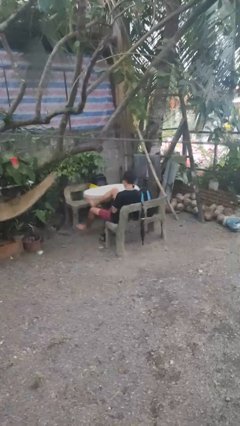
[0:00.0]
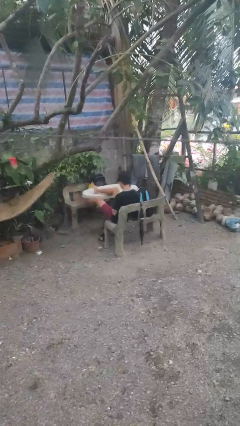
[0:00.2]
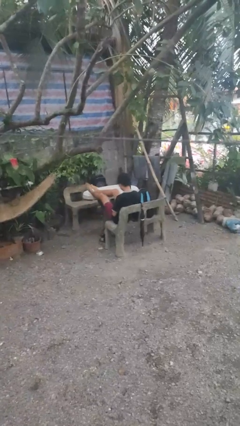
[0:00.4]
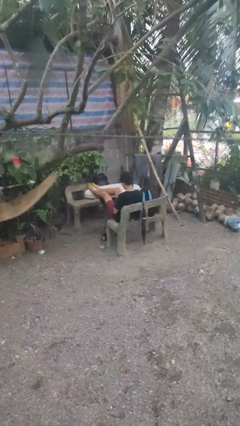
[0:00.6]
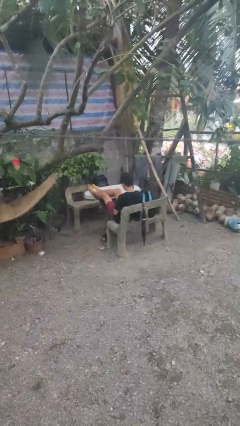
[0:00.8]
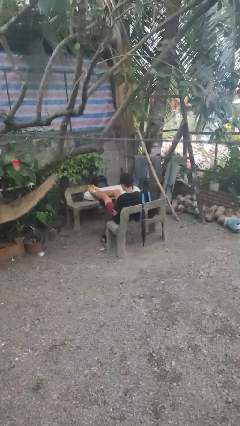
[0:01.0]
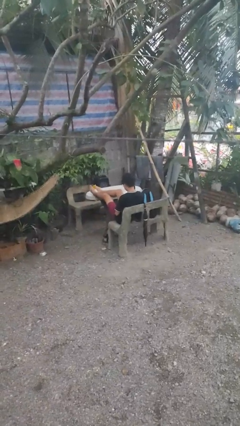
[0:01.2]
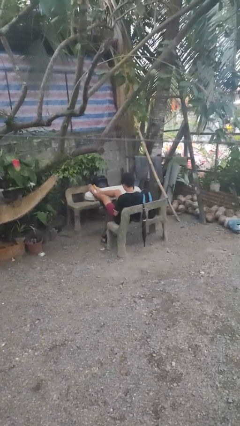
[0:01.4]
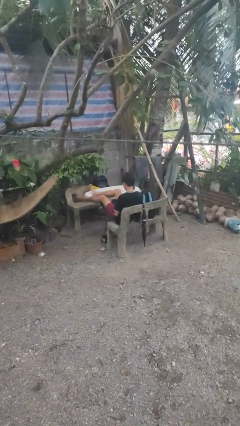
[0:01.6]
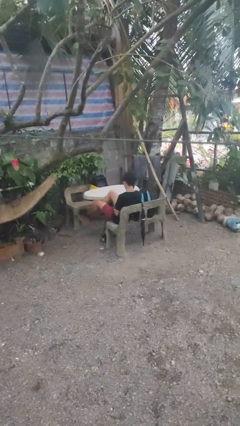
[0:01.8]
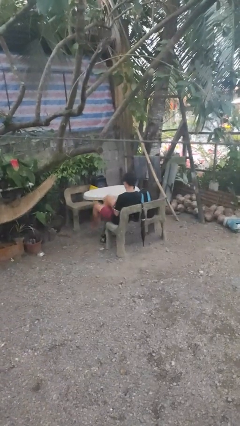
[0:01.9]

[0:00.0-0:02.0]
person puts feet up

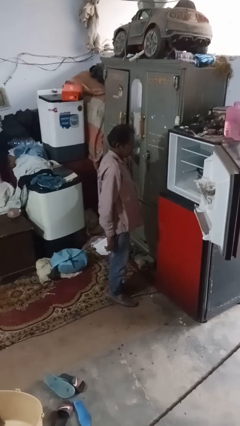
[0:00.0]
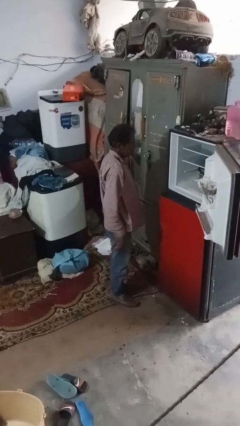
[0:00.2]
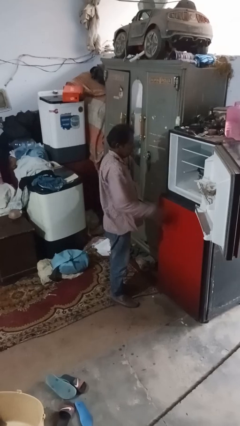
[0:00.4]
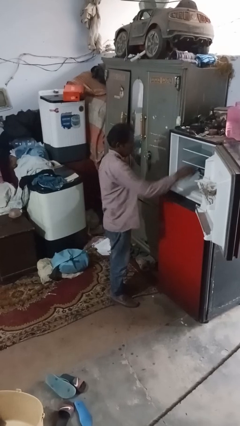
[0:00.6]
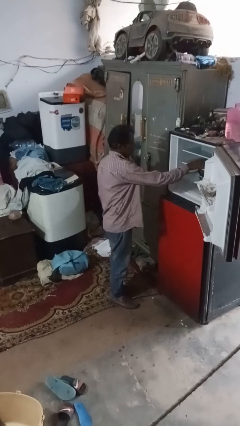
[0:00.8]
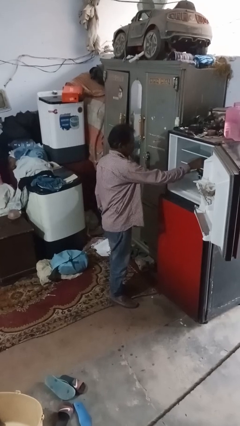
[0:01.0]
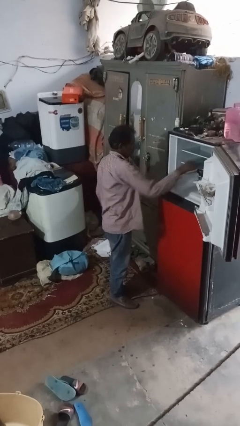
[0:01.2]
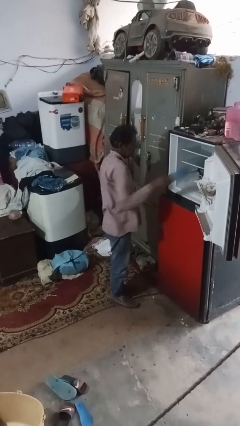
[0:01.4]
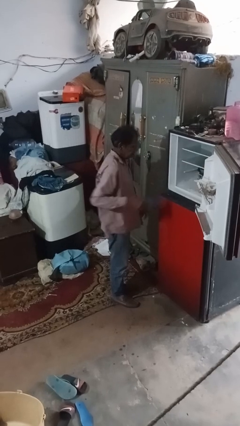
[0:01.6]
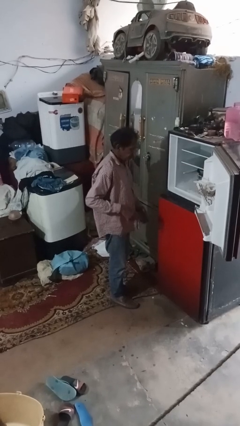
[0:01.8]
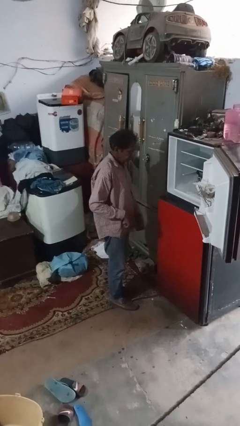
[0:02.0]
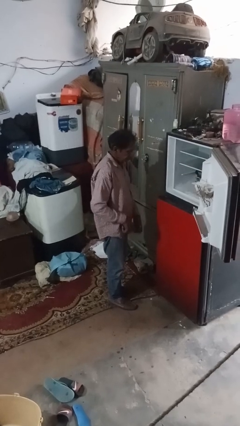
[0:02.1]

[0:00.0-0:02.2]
person takes object from refrigerator

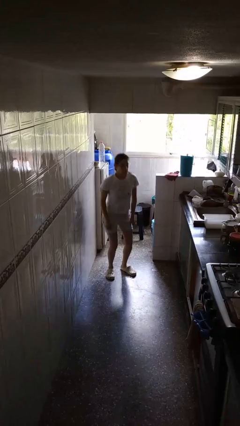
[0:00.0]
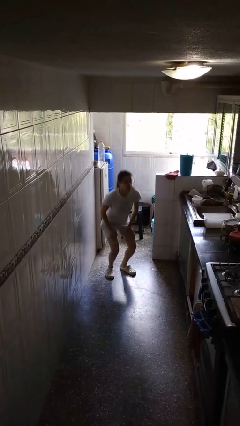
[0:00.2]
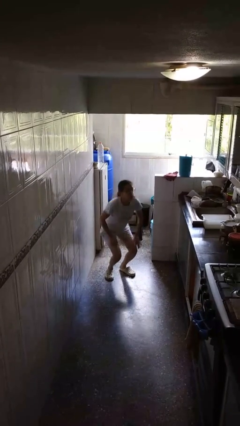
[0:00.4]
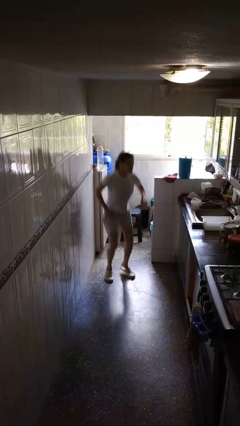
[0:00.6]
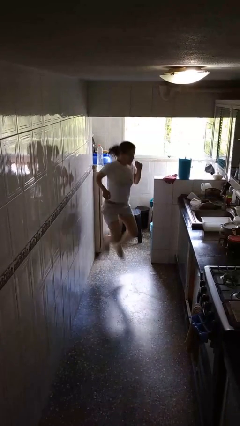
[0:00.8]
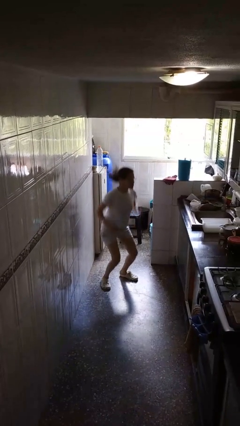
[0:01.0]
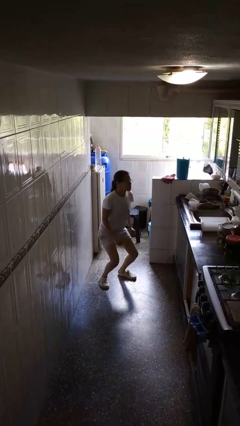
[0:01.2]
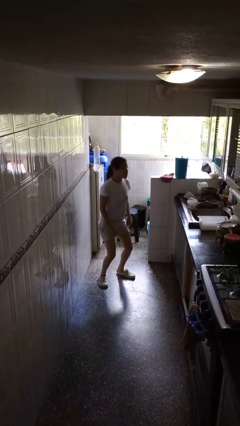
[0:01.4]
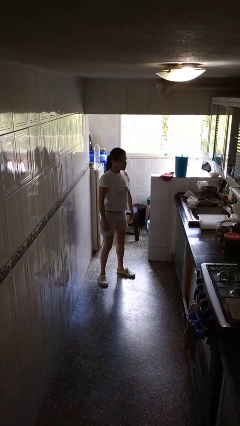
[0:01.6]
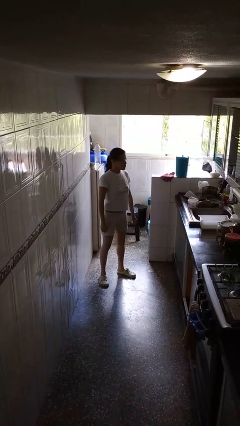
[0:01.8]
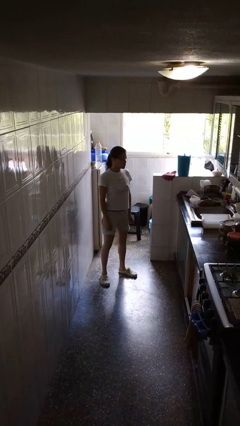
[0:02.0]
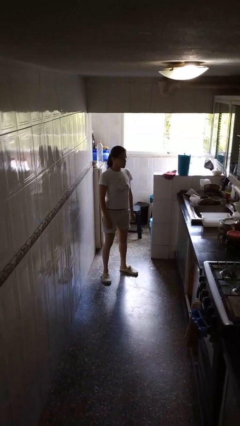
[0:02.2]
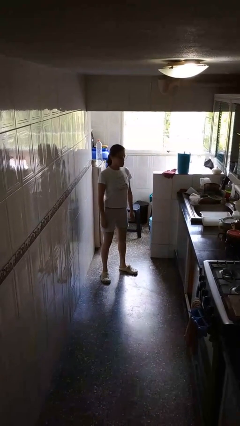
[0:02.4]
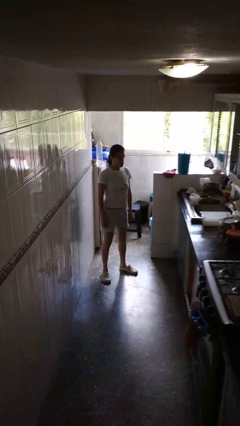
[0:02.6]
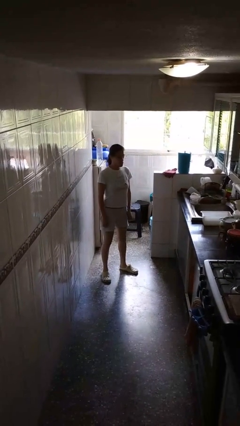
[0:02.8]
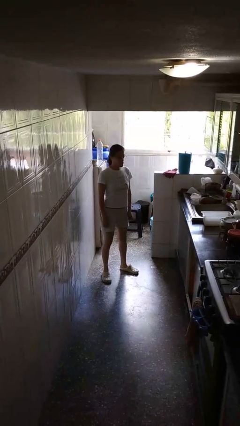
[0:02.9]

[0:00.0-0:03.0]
person jumps

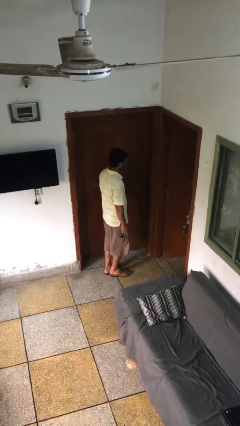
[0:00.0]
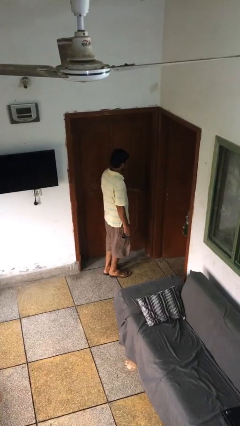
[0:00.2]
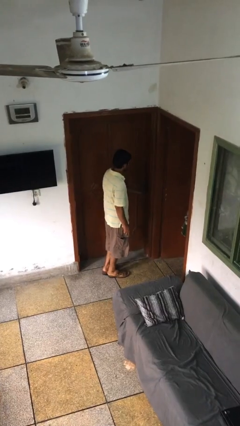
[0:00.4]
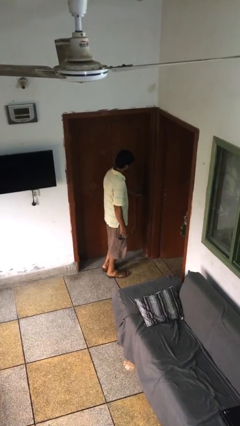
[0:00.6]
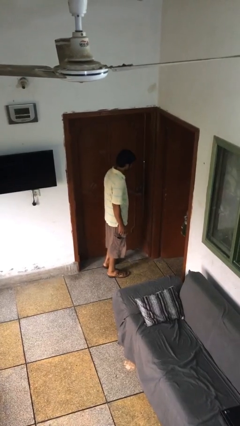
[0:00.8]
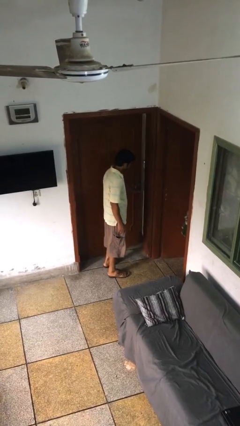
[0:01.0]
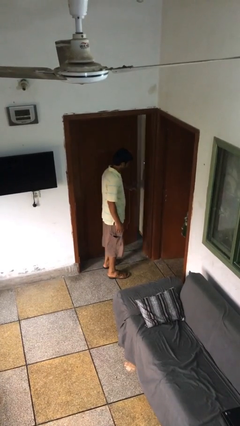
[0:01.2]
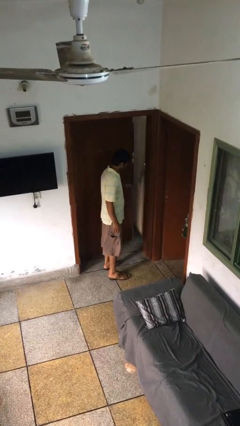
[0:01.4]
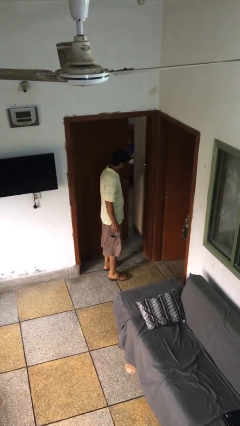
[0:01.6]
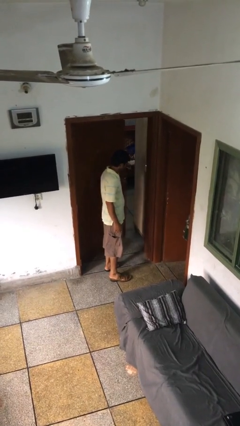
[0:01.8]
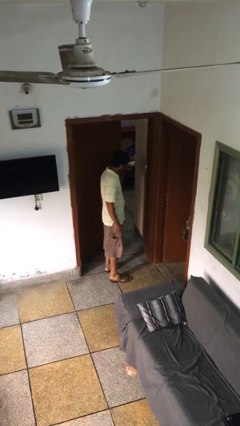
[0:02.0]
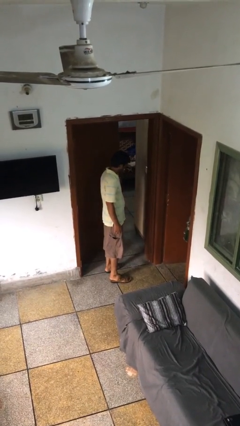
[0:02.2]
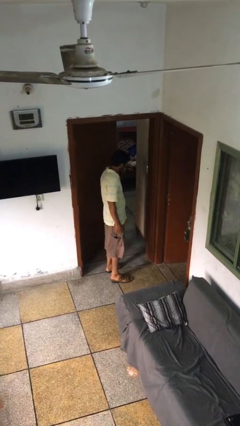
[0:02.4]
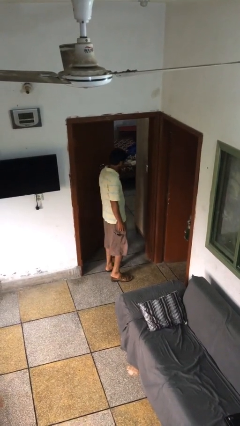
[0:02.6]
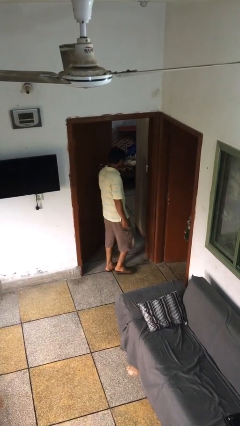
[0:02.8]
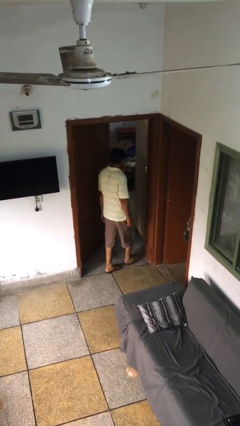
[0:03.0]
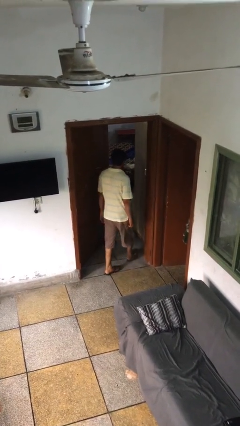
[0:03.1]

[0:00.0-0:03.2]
person opens facility door

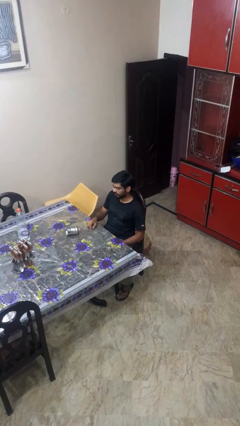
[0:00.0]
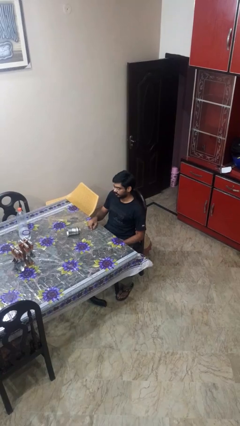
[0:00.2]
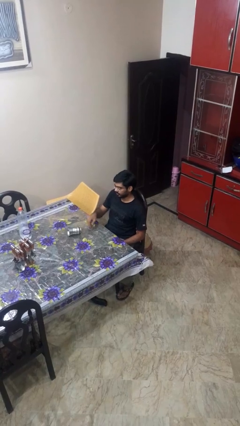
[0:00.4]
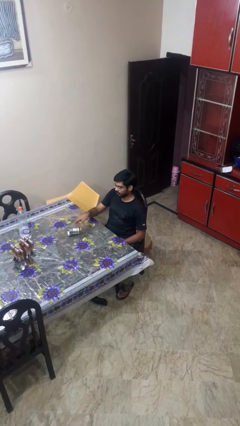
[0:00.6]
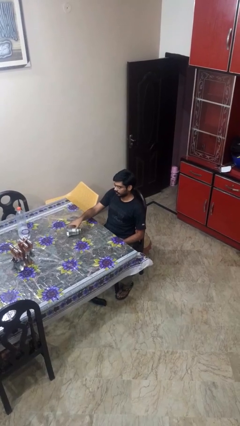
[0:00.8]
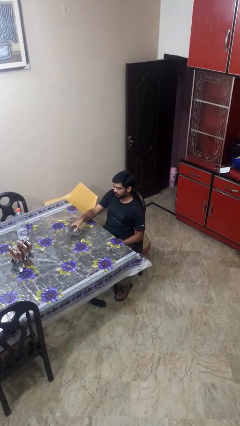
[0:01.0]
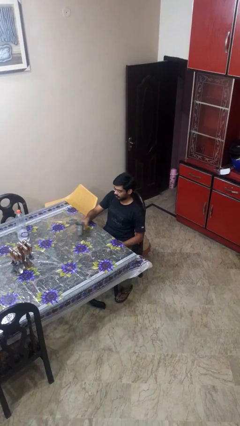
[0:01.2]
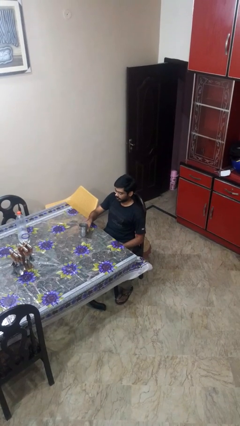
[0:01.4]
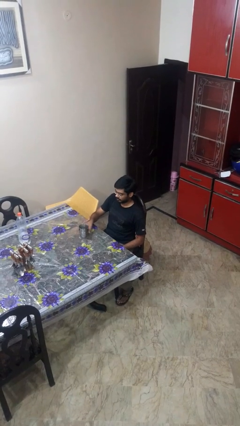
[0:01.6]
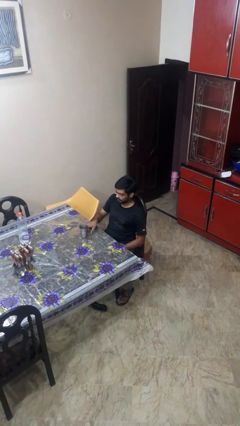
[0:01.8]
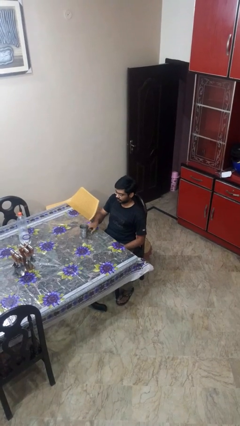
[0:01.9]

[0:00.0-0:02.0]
person sets upright glass

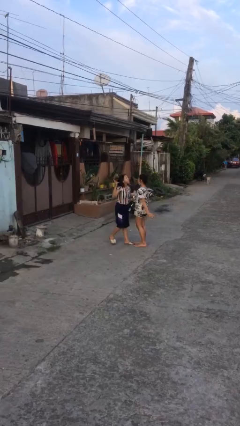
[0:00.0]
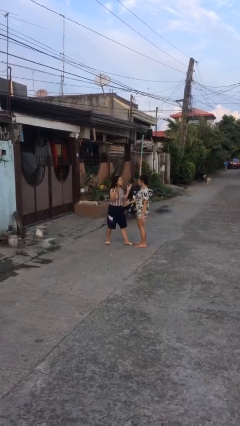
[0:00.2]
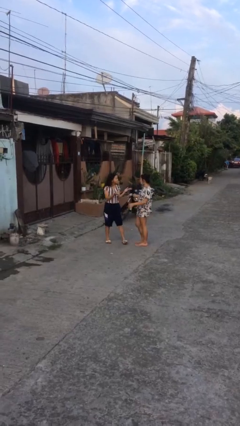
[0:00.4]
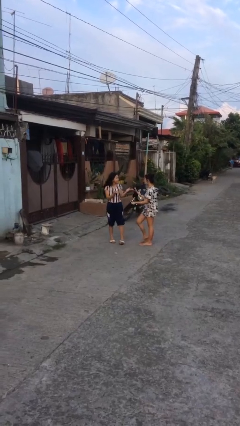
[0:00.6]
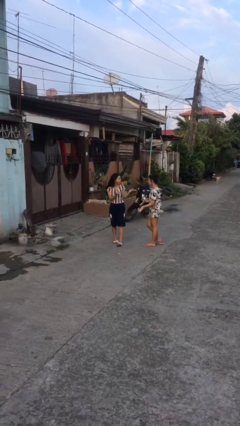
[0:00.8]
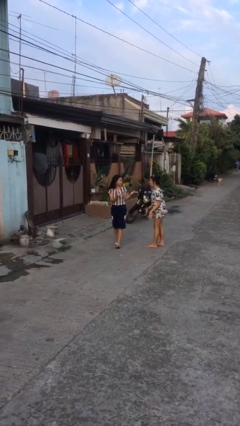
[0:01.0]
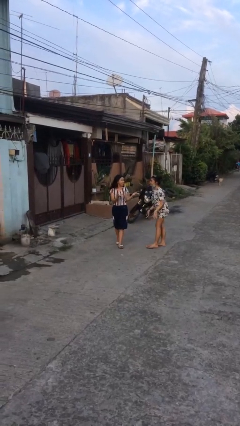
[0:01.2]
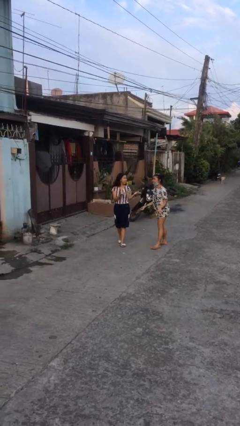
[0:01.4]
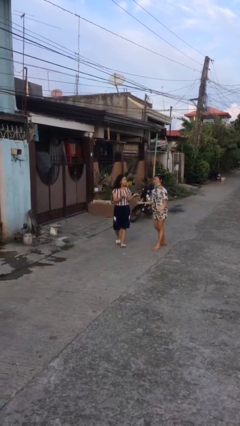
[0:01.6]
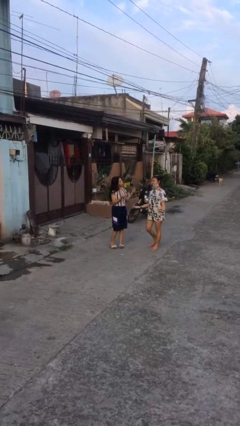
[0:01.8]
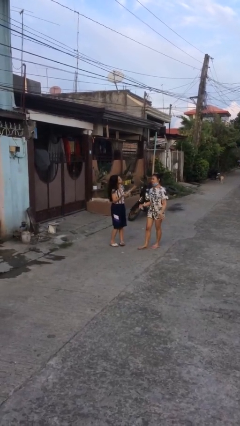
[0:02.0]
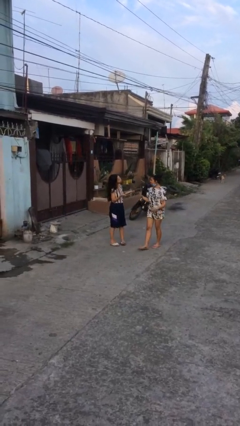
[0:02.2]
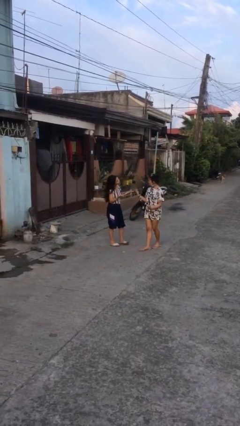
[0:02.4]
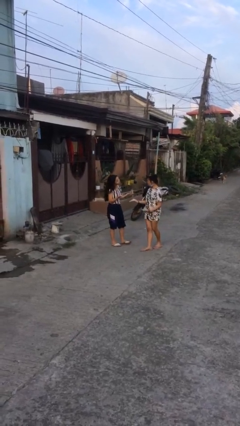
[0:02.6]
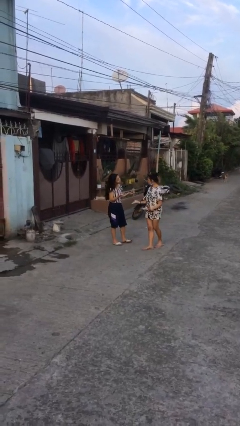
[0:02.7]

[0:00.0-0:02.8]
person talks to person

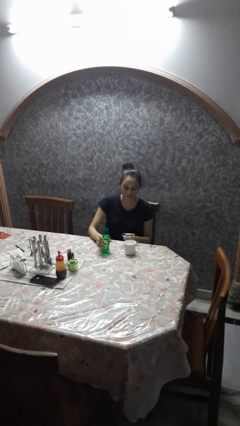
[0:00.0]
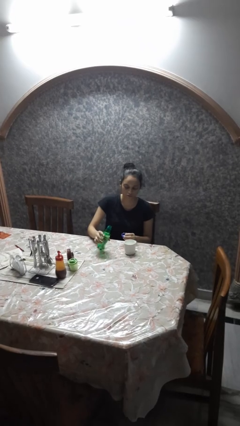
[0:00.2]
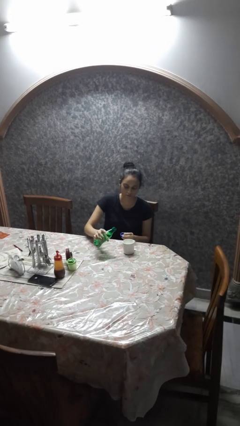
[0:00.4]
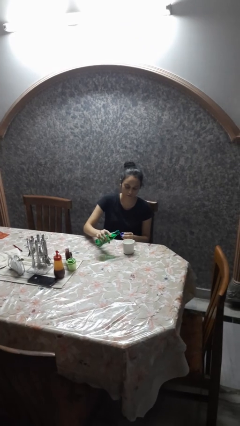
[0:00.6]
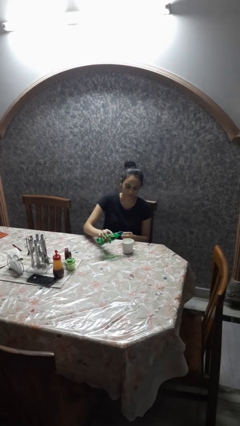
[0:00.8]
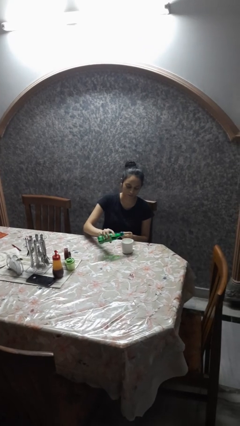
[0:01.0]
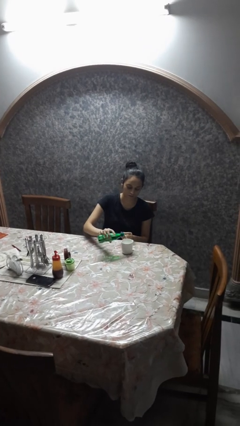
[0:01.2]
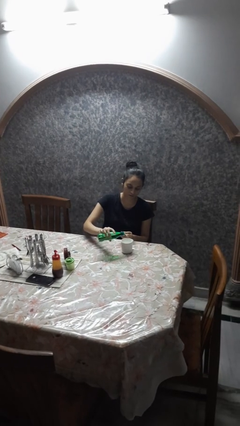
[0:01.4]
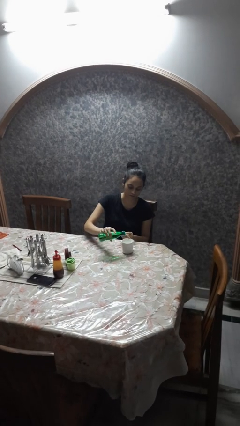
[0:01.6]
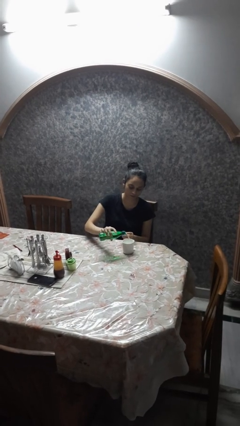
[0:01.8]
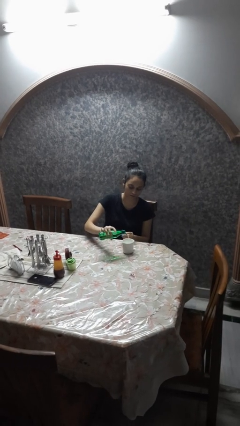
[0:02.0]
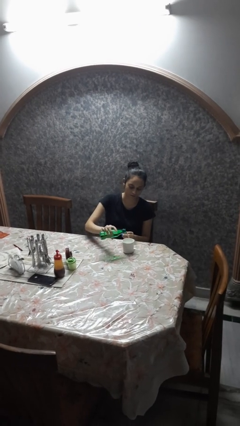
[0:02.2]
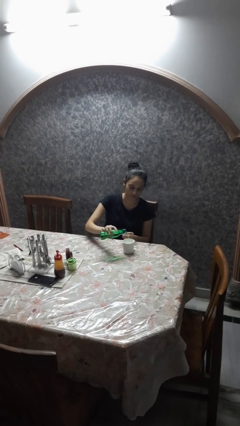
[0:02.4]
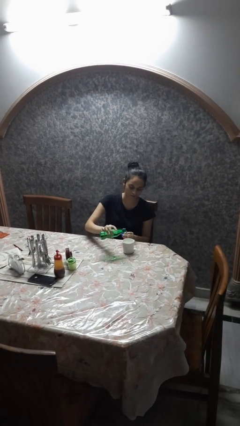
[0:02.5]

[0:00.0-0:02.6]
person pours liquid into cup
